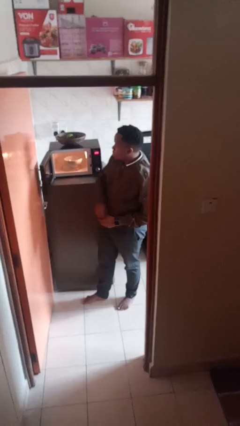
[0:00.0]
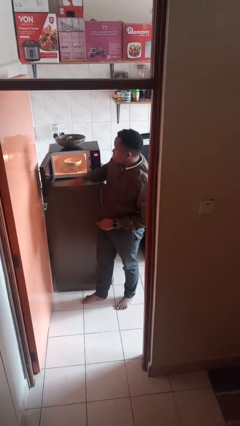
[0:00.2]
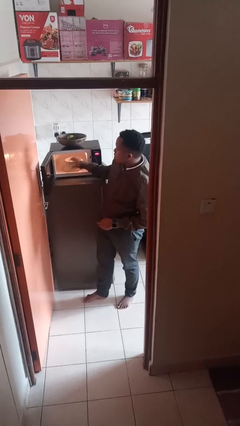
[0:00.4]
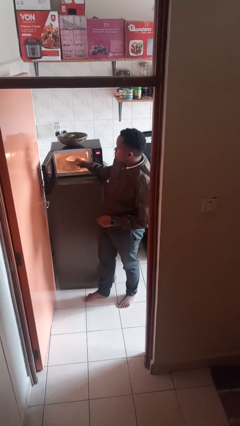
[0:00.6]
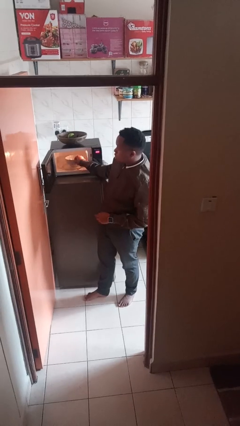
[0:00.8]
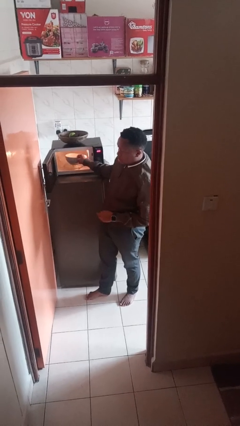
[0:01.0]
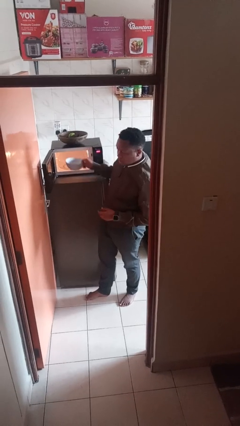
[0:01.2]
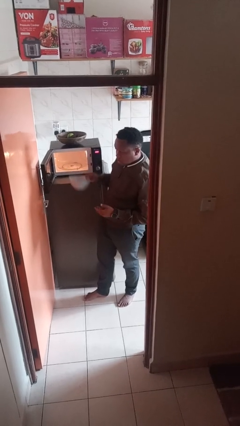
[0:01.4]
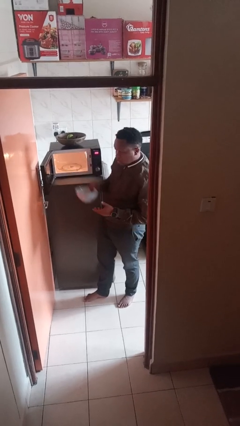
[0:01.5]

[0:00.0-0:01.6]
person takes object from microwave

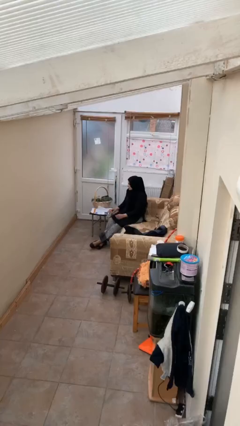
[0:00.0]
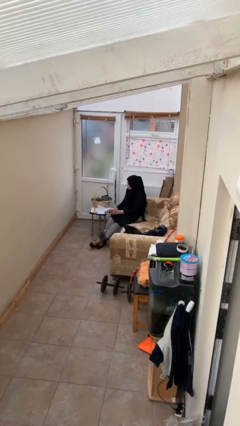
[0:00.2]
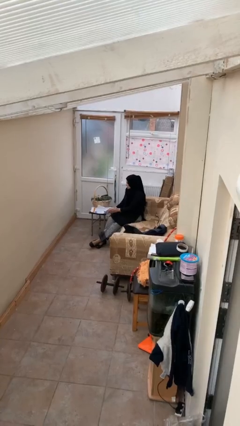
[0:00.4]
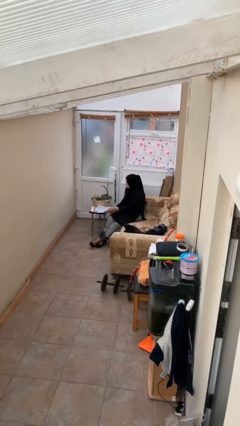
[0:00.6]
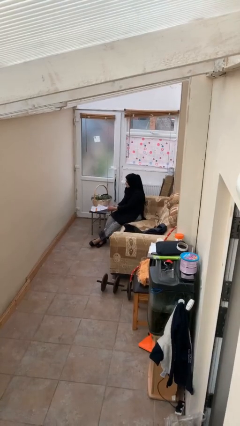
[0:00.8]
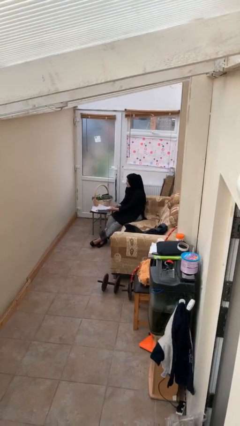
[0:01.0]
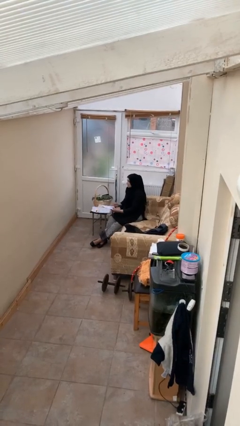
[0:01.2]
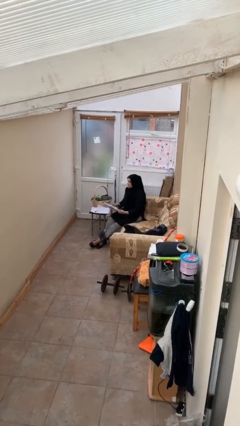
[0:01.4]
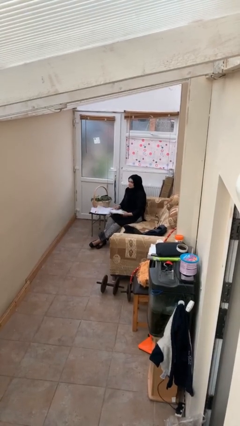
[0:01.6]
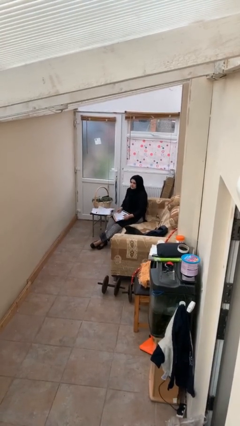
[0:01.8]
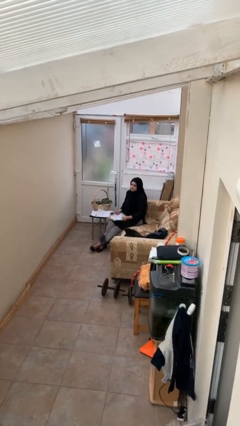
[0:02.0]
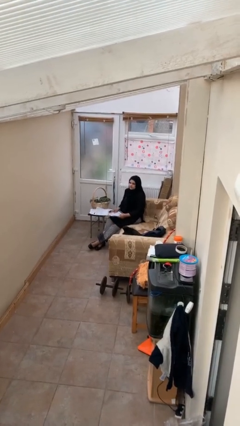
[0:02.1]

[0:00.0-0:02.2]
person picks up object from table
